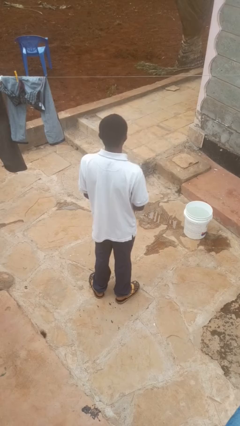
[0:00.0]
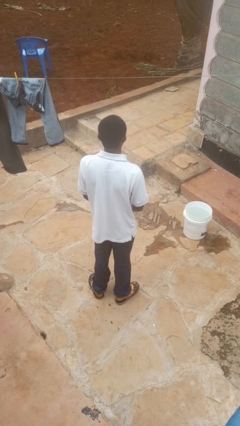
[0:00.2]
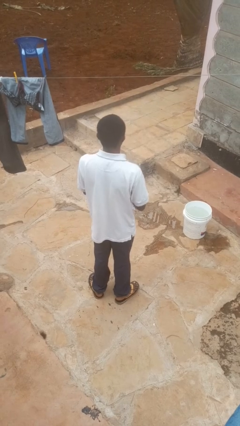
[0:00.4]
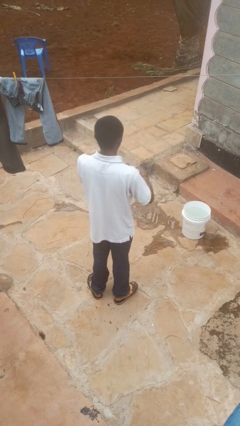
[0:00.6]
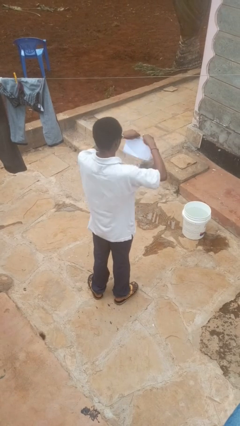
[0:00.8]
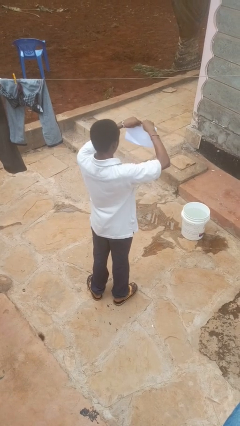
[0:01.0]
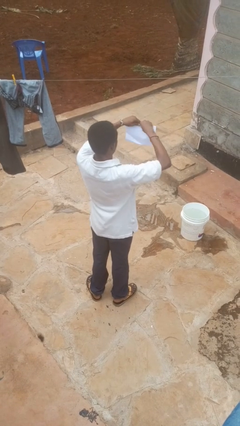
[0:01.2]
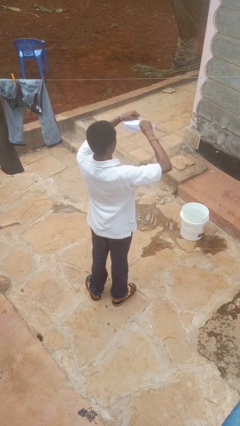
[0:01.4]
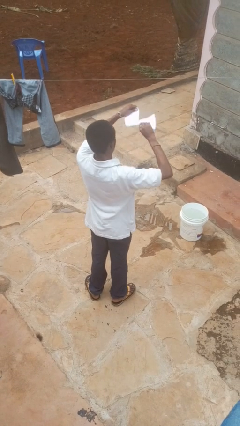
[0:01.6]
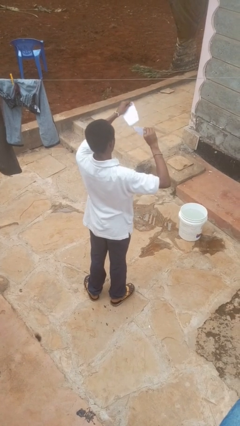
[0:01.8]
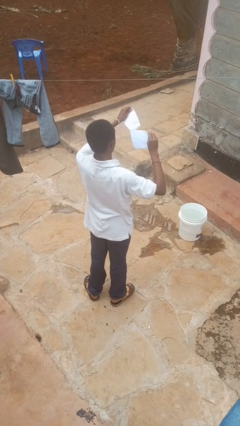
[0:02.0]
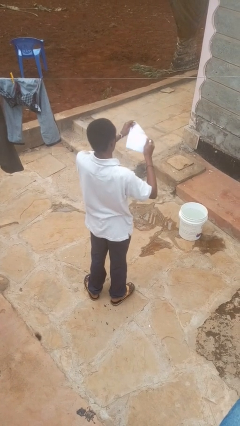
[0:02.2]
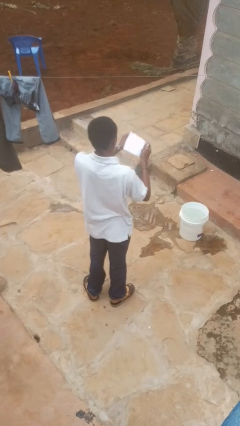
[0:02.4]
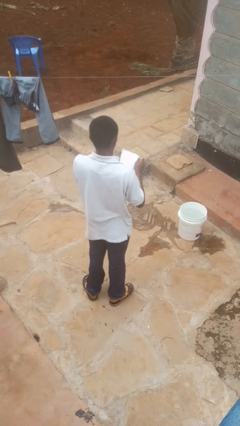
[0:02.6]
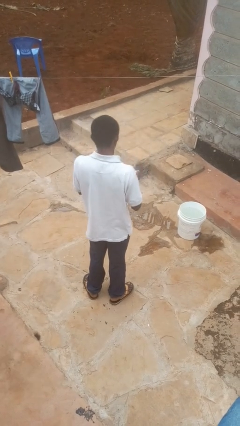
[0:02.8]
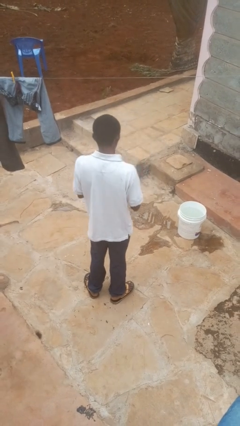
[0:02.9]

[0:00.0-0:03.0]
person tears paper

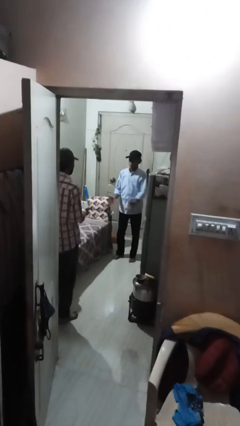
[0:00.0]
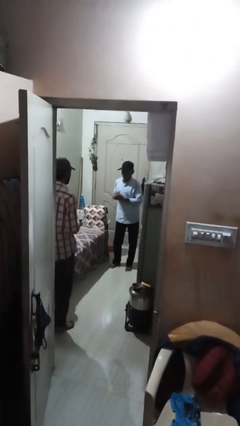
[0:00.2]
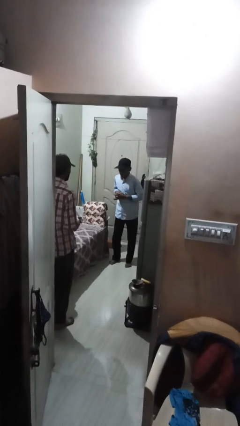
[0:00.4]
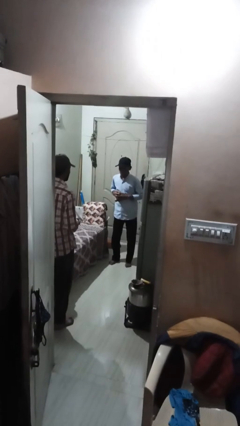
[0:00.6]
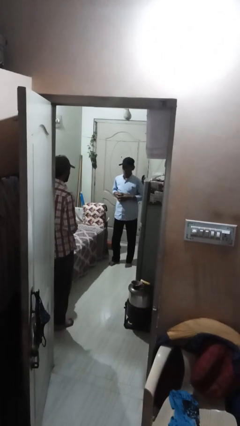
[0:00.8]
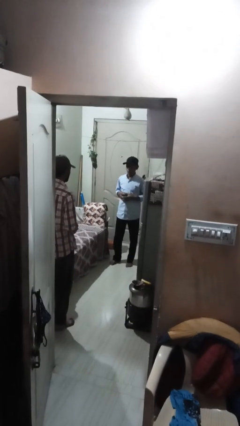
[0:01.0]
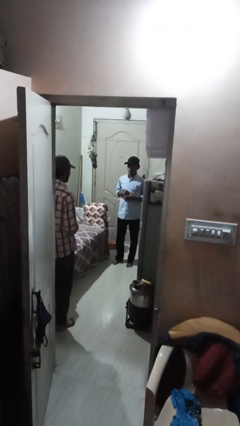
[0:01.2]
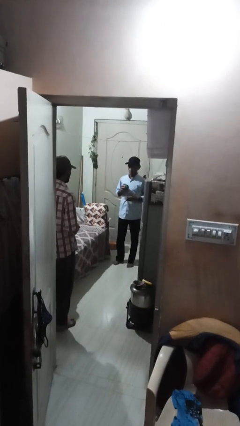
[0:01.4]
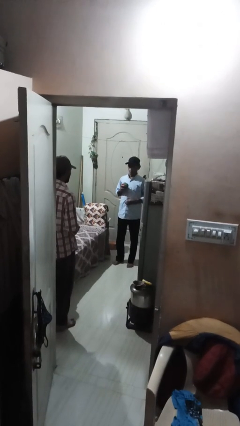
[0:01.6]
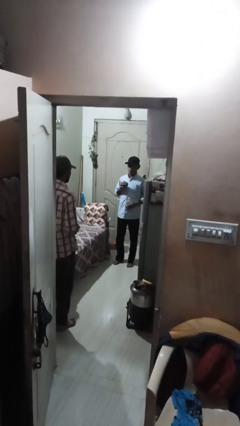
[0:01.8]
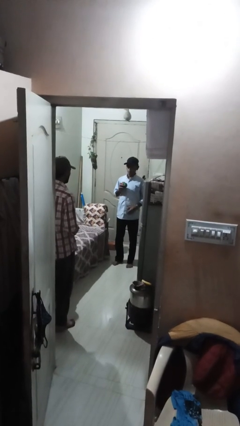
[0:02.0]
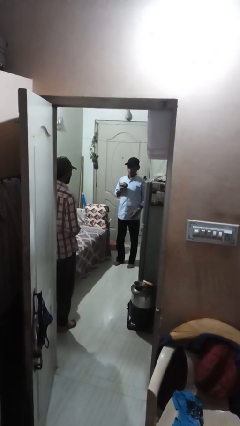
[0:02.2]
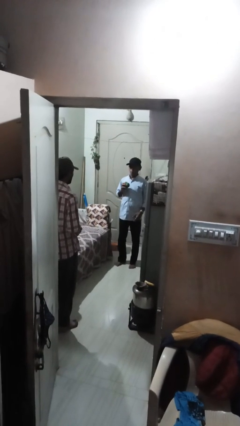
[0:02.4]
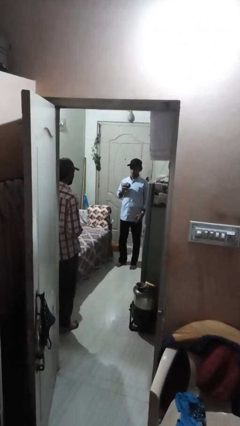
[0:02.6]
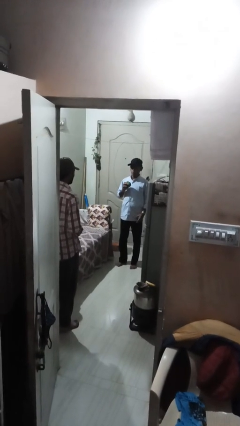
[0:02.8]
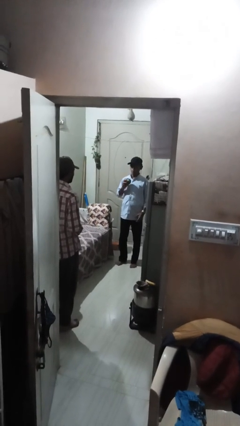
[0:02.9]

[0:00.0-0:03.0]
person catches object from person

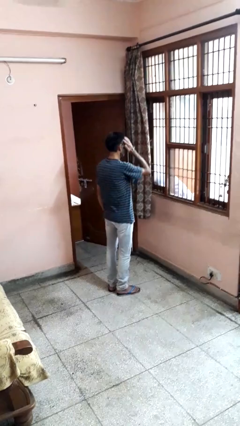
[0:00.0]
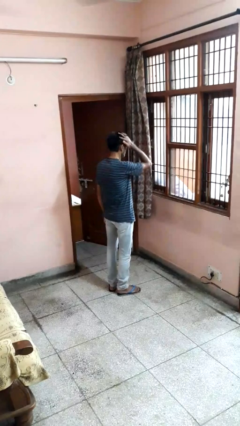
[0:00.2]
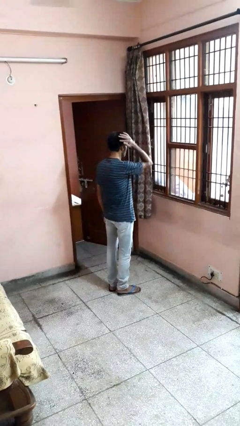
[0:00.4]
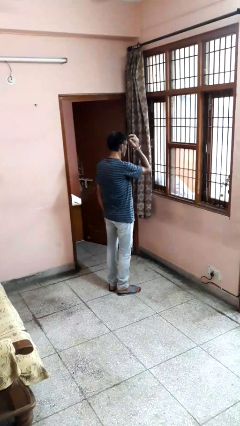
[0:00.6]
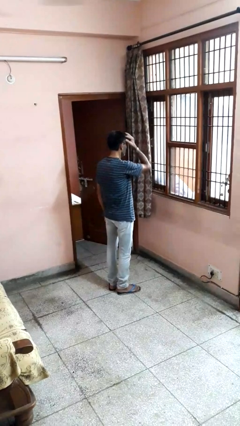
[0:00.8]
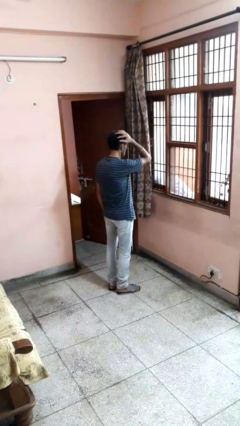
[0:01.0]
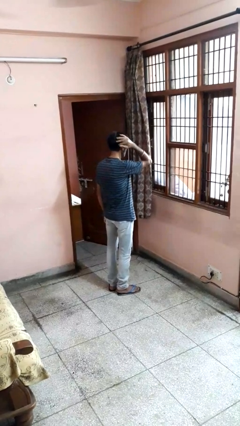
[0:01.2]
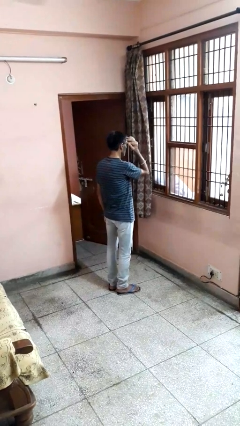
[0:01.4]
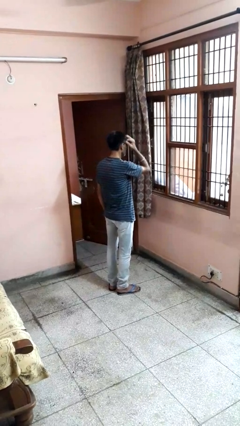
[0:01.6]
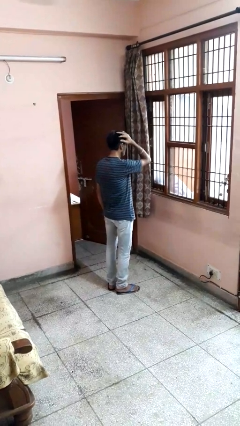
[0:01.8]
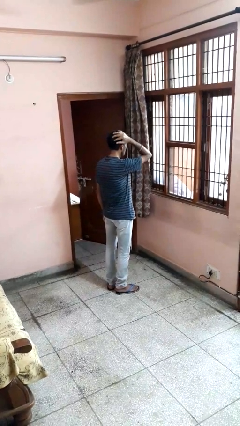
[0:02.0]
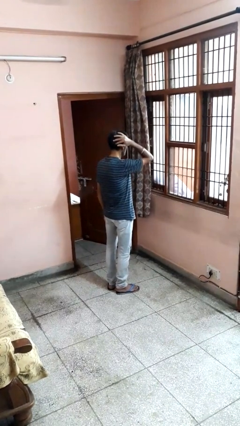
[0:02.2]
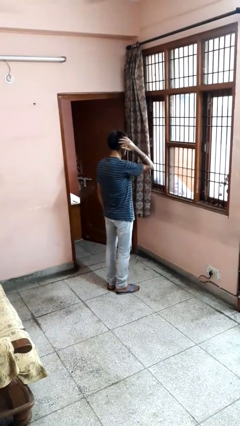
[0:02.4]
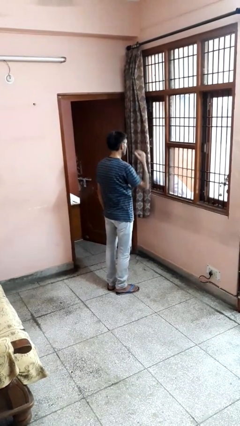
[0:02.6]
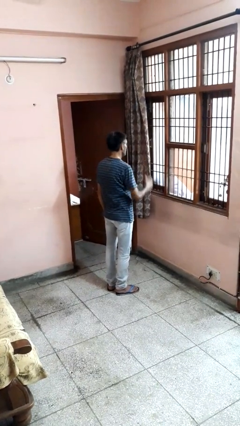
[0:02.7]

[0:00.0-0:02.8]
person strokes hair

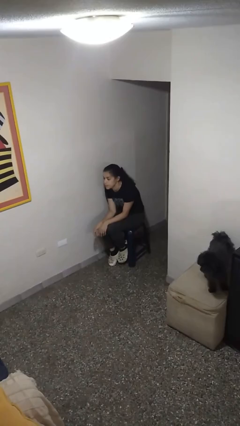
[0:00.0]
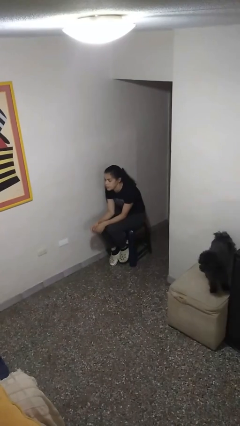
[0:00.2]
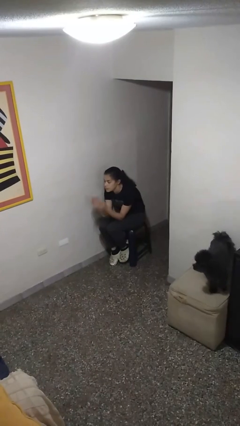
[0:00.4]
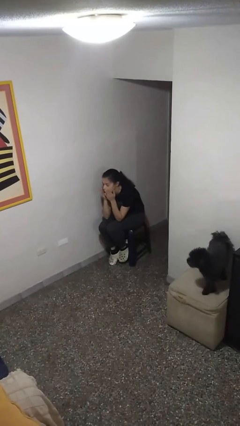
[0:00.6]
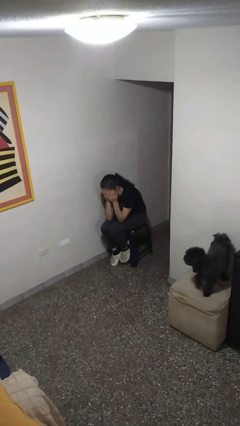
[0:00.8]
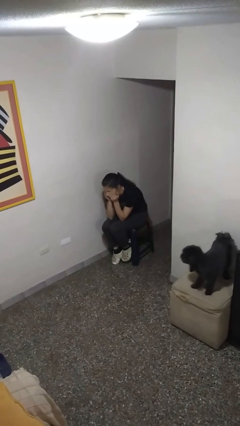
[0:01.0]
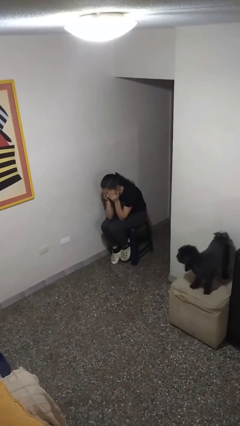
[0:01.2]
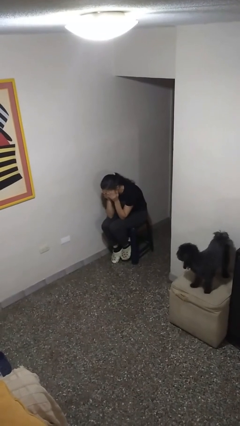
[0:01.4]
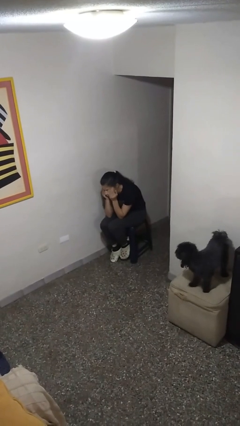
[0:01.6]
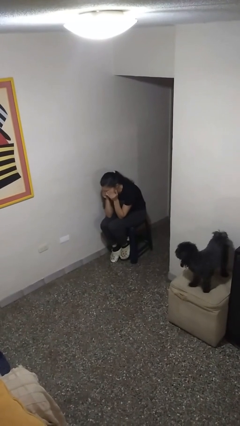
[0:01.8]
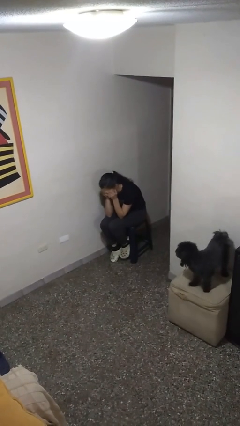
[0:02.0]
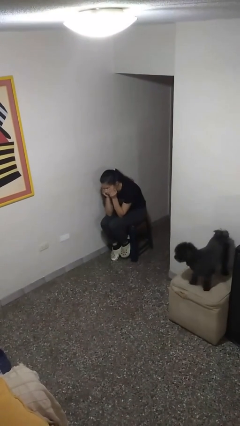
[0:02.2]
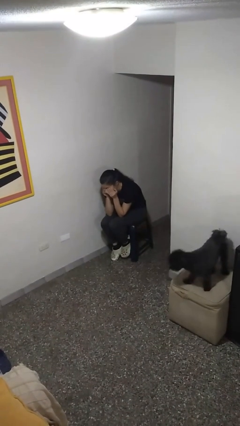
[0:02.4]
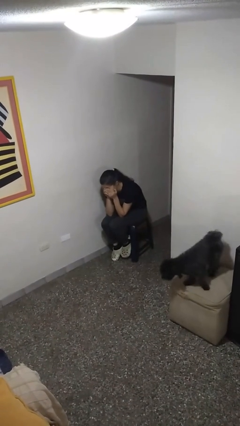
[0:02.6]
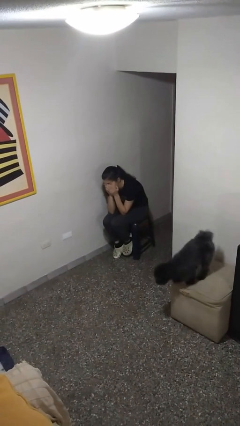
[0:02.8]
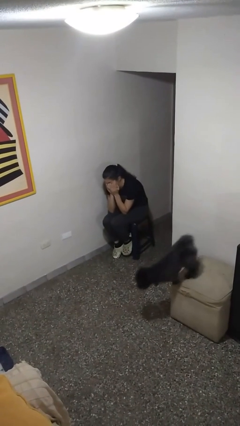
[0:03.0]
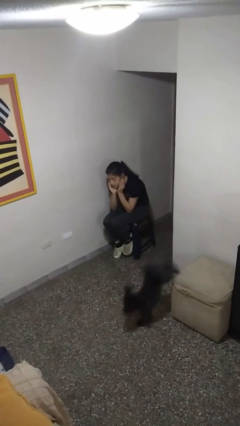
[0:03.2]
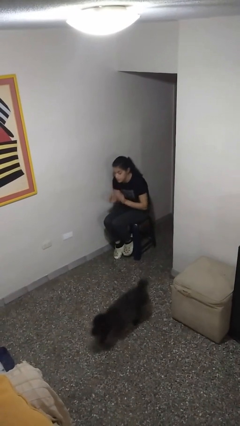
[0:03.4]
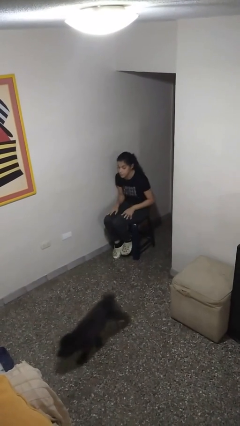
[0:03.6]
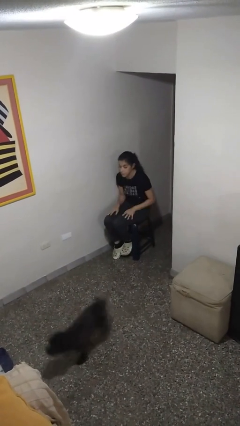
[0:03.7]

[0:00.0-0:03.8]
person rubs eyes

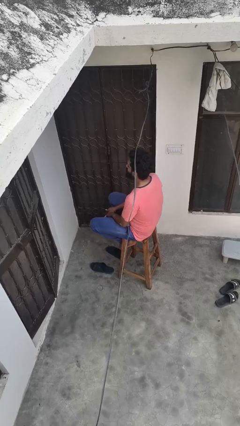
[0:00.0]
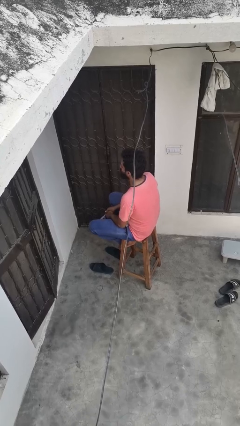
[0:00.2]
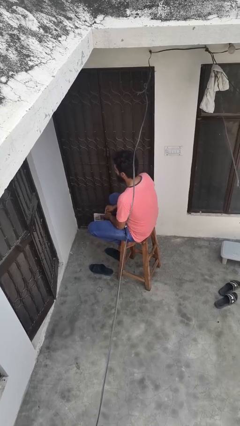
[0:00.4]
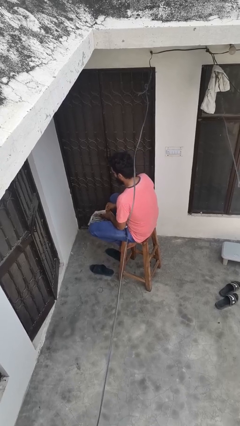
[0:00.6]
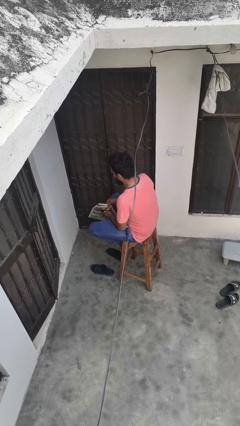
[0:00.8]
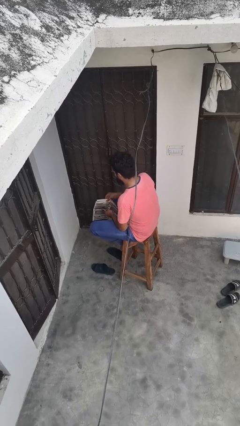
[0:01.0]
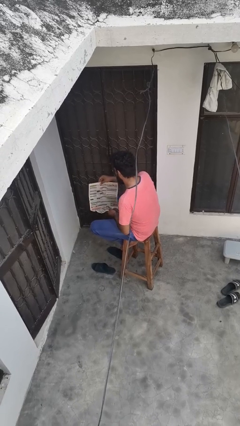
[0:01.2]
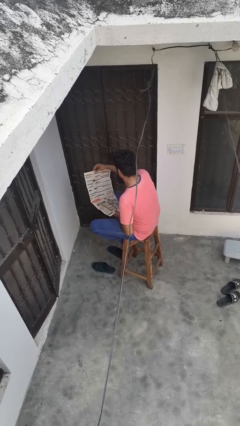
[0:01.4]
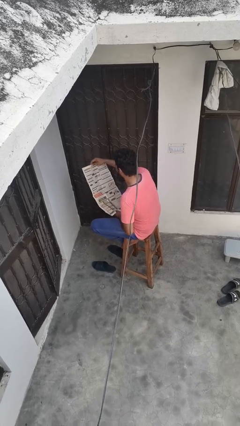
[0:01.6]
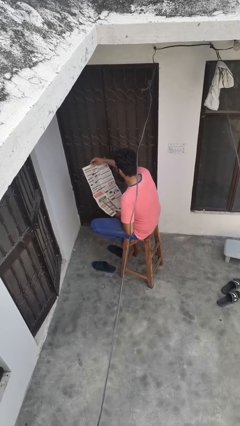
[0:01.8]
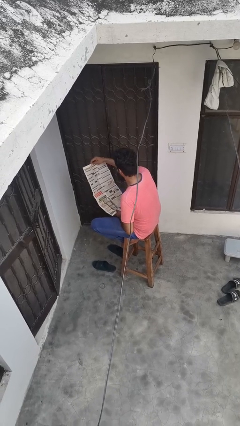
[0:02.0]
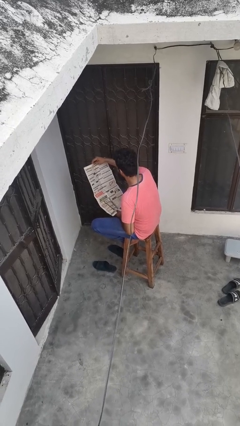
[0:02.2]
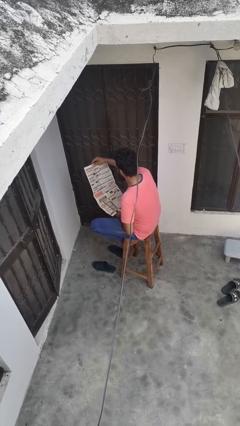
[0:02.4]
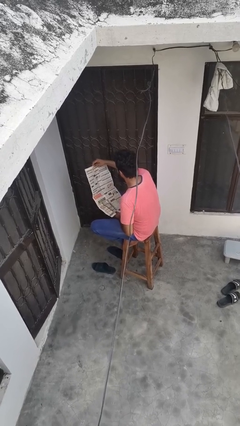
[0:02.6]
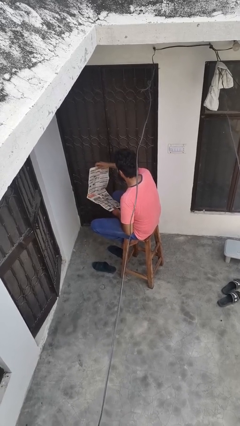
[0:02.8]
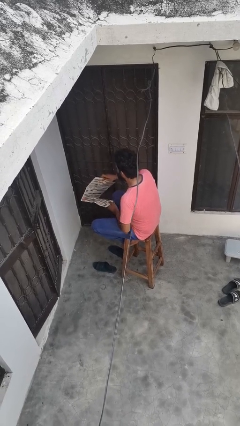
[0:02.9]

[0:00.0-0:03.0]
person reads newspaper

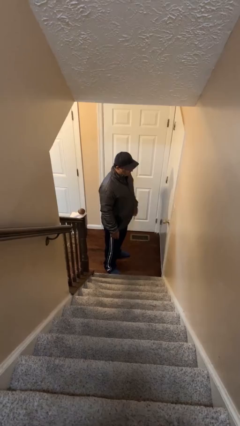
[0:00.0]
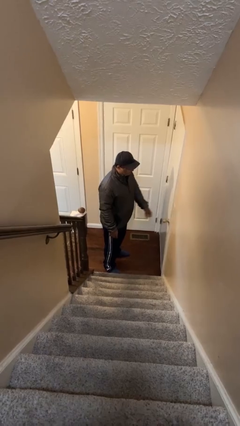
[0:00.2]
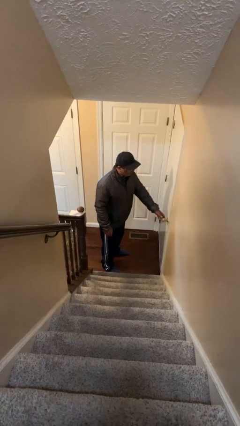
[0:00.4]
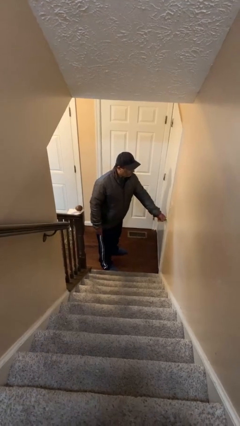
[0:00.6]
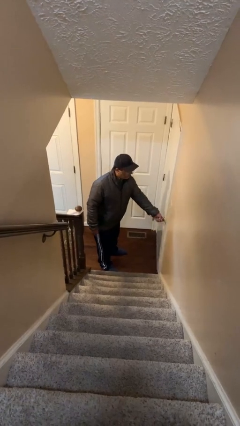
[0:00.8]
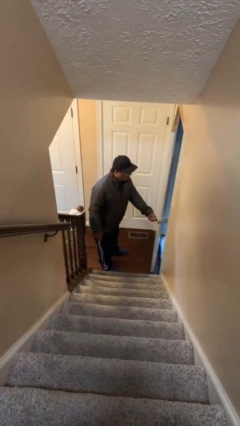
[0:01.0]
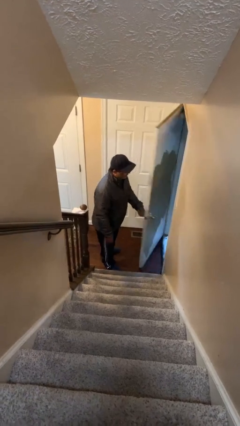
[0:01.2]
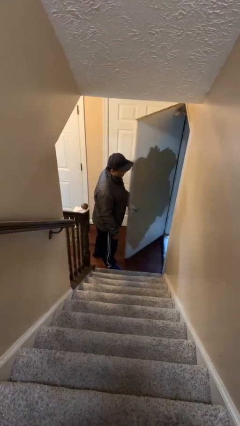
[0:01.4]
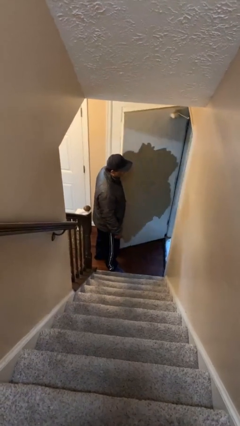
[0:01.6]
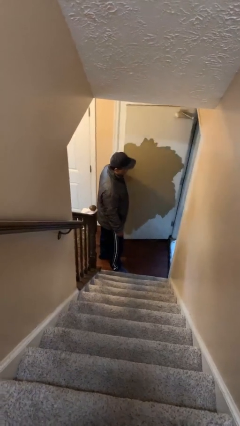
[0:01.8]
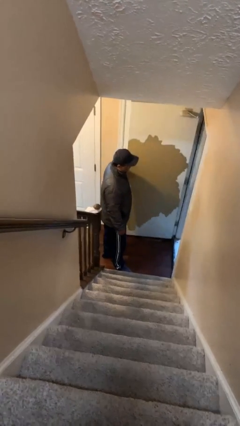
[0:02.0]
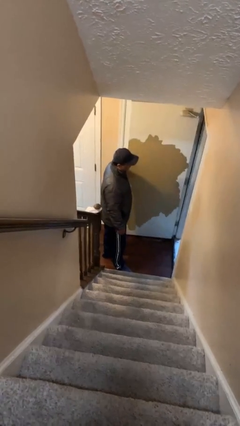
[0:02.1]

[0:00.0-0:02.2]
person opens facility door
